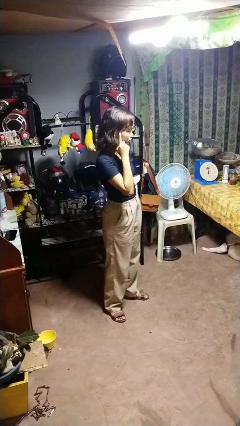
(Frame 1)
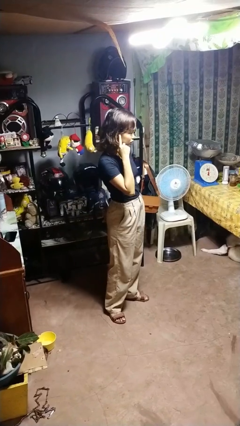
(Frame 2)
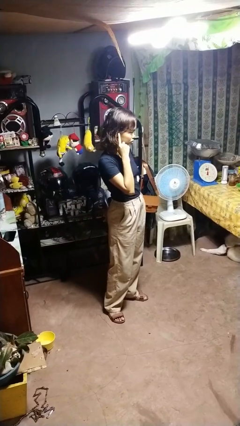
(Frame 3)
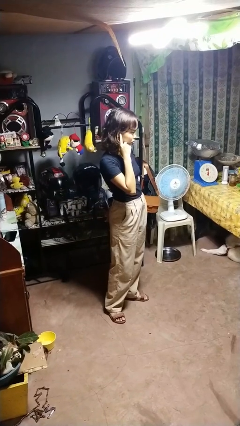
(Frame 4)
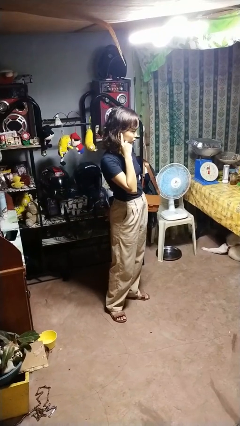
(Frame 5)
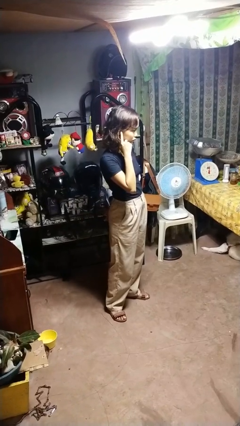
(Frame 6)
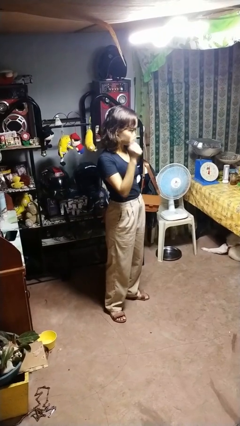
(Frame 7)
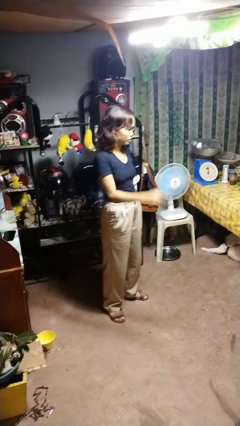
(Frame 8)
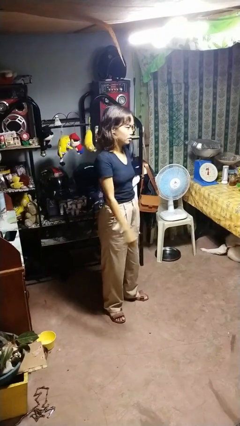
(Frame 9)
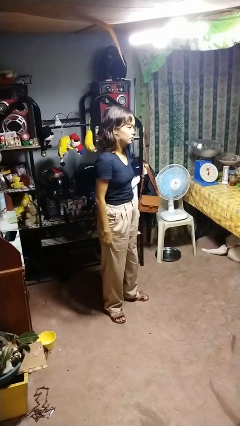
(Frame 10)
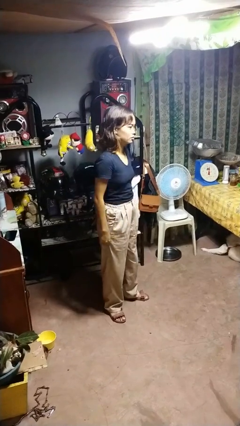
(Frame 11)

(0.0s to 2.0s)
person gestures listen closely

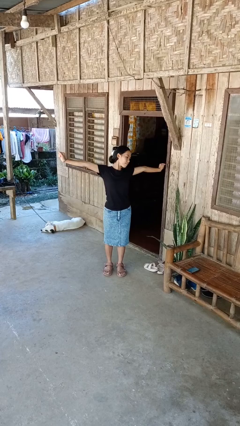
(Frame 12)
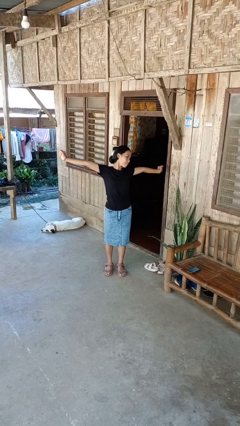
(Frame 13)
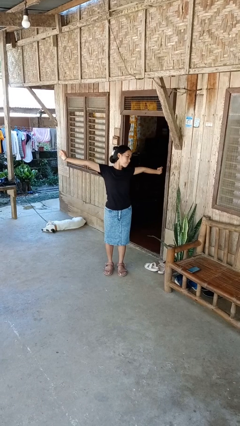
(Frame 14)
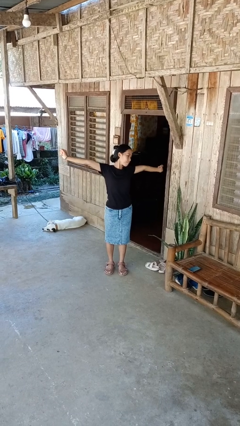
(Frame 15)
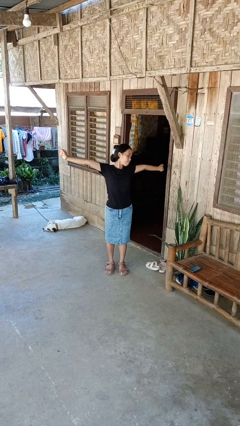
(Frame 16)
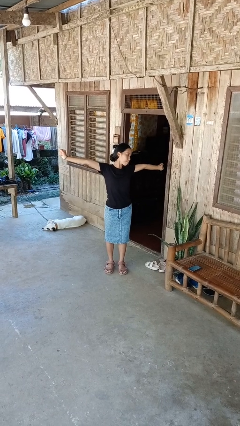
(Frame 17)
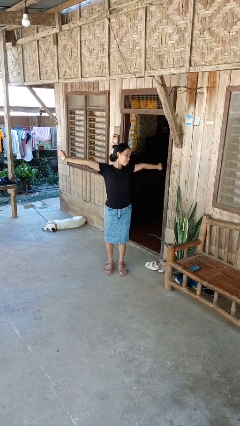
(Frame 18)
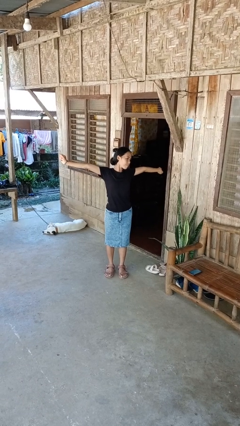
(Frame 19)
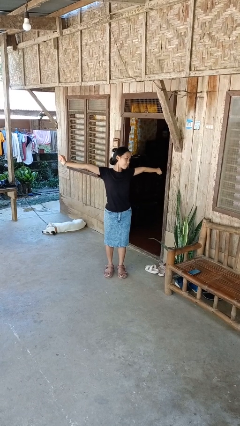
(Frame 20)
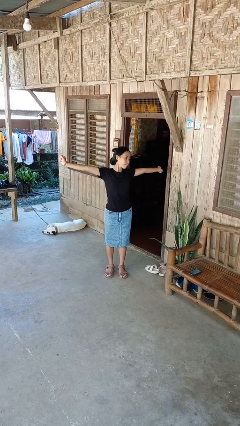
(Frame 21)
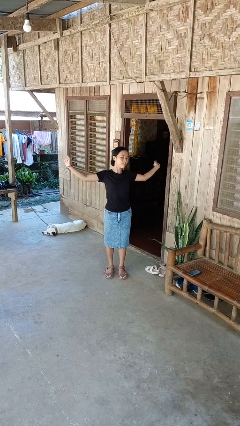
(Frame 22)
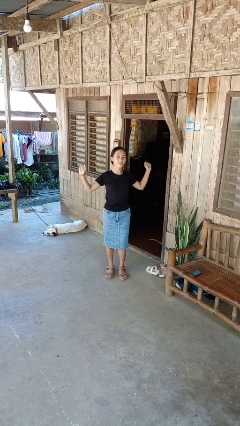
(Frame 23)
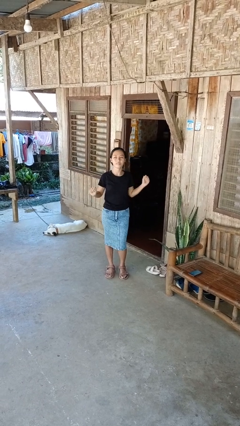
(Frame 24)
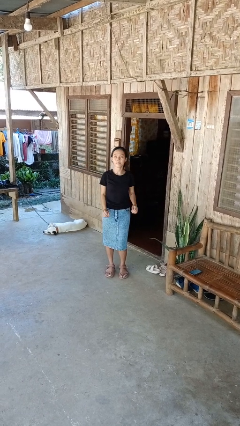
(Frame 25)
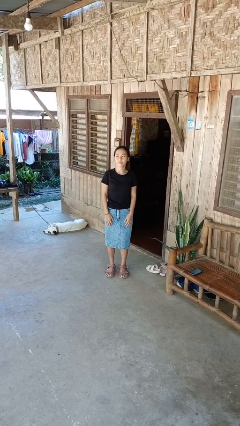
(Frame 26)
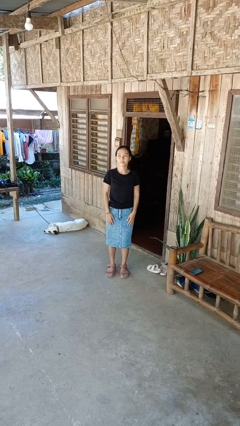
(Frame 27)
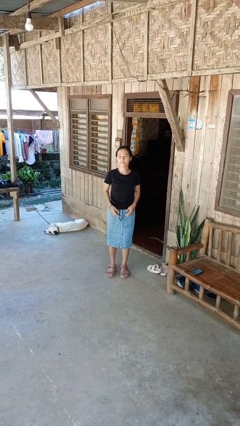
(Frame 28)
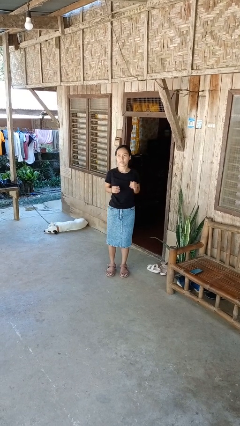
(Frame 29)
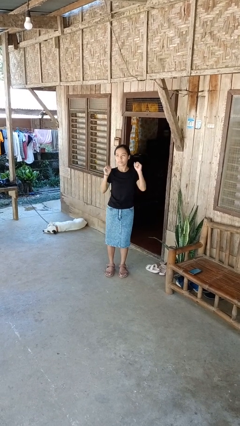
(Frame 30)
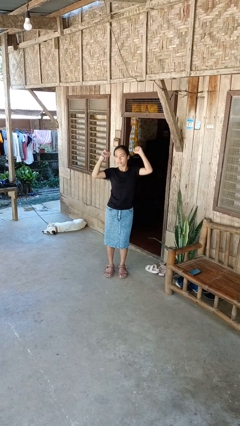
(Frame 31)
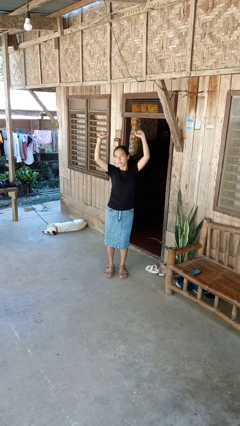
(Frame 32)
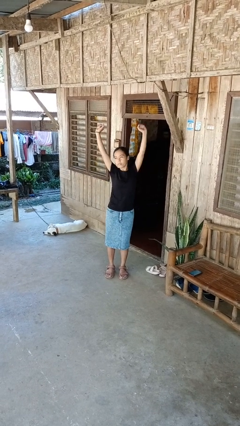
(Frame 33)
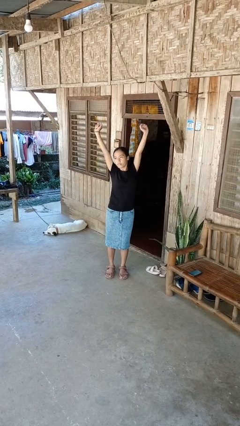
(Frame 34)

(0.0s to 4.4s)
person stretches arms to side

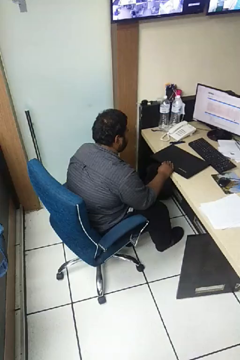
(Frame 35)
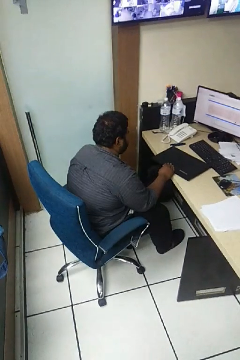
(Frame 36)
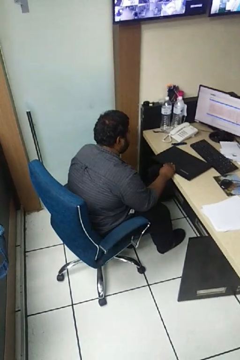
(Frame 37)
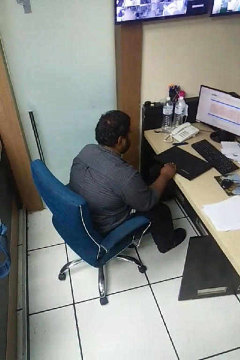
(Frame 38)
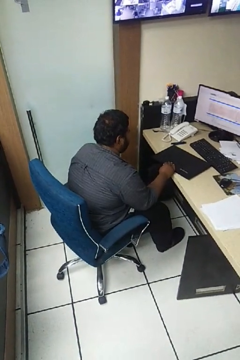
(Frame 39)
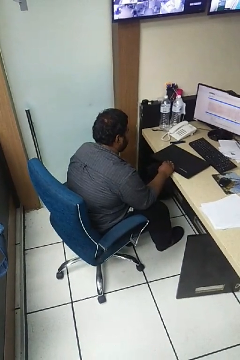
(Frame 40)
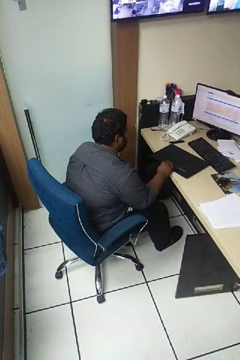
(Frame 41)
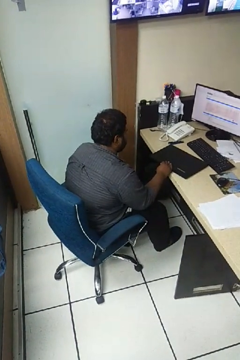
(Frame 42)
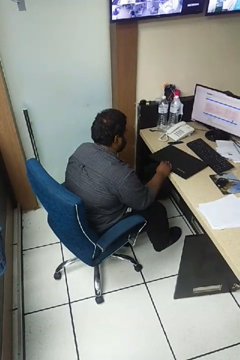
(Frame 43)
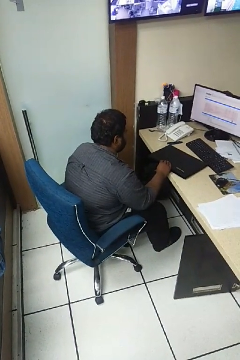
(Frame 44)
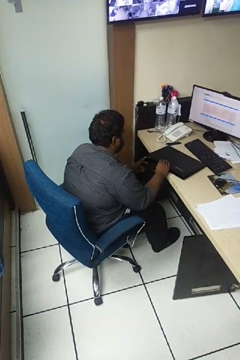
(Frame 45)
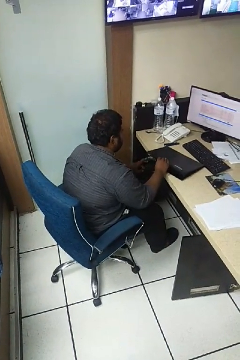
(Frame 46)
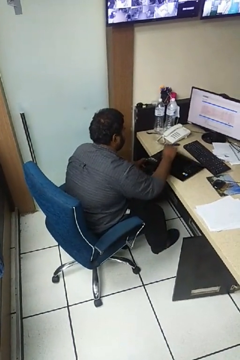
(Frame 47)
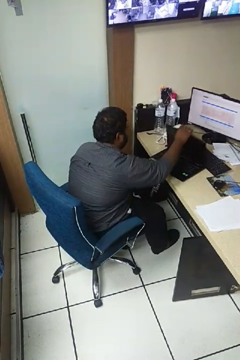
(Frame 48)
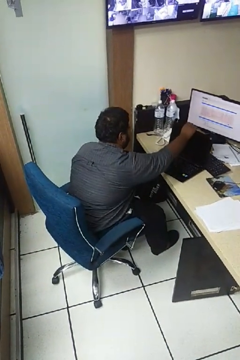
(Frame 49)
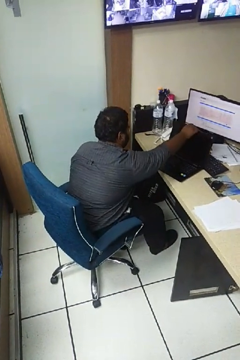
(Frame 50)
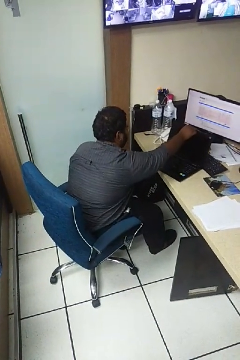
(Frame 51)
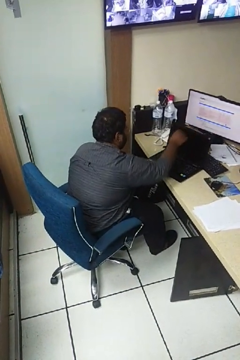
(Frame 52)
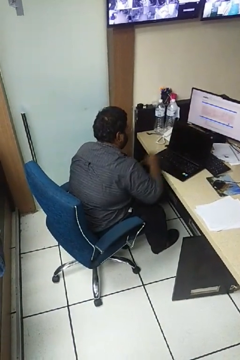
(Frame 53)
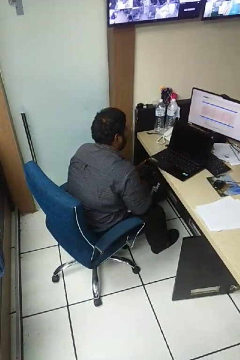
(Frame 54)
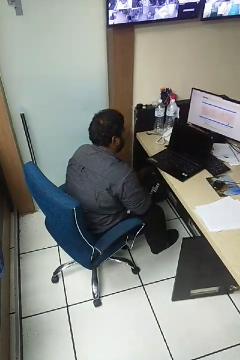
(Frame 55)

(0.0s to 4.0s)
person opens laptop

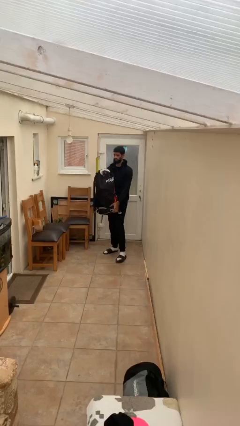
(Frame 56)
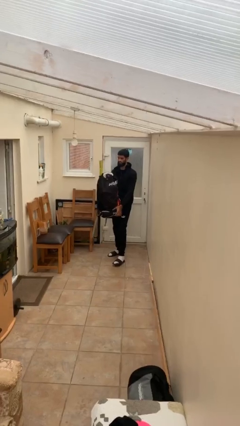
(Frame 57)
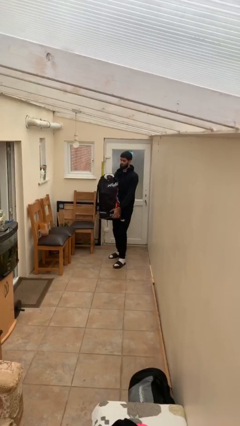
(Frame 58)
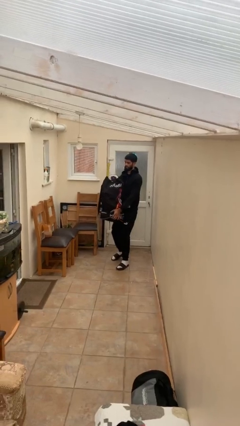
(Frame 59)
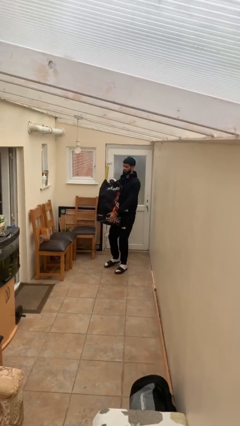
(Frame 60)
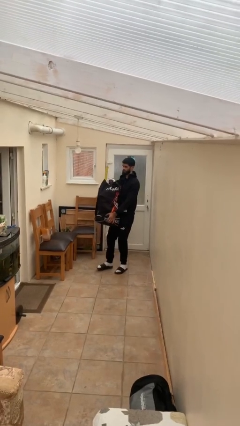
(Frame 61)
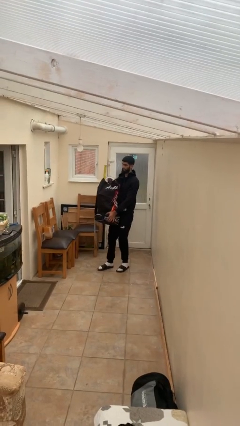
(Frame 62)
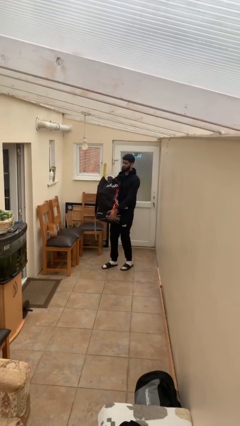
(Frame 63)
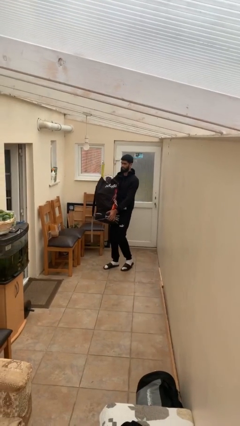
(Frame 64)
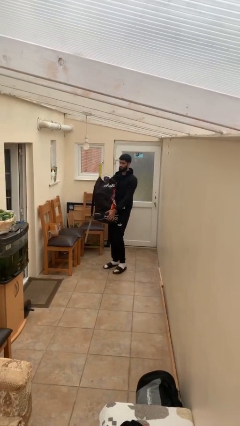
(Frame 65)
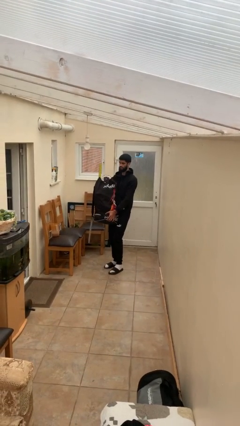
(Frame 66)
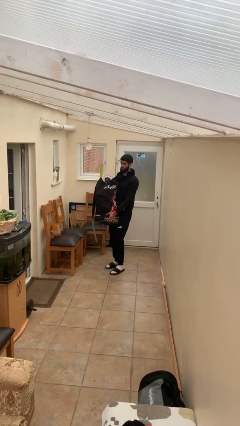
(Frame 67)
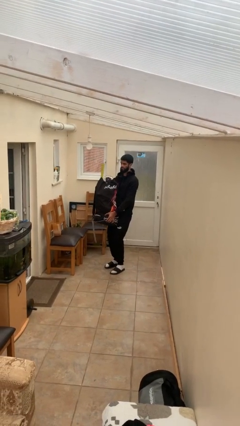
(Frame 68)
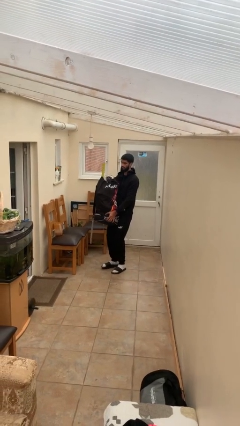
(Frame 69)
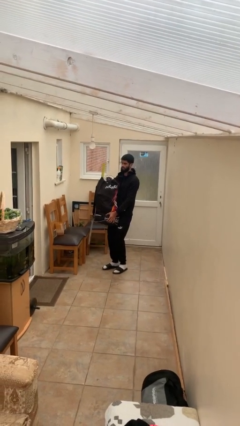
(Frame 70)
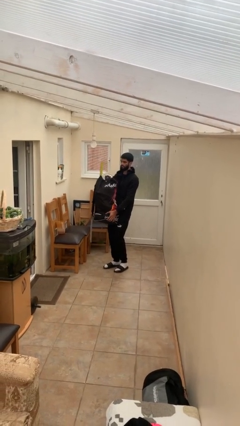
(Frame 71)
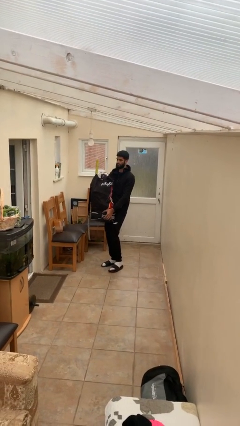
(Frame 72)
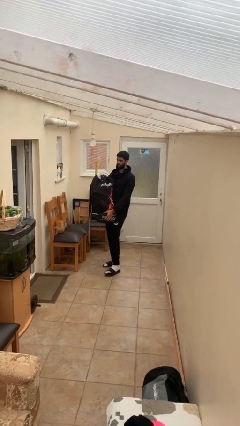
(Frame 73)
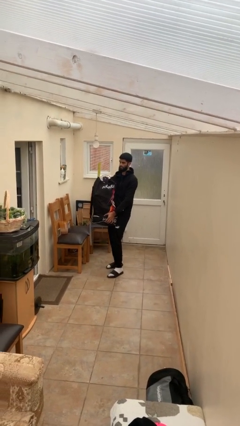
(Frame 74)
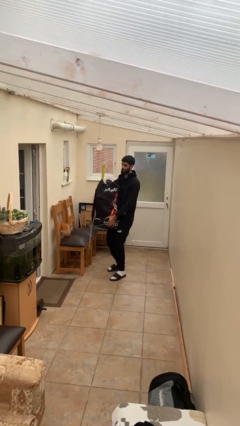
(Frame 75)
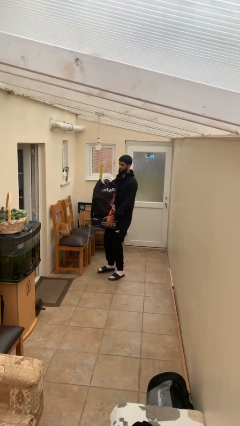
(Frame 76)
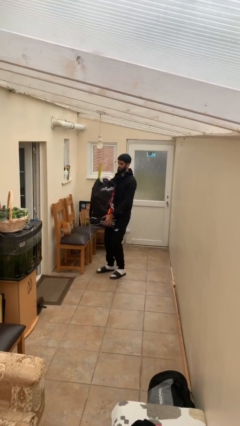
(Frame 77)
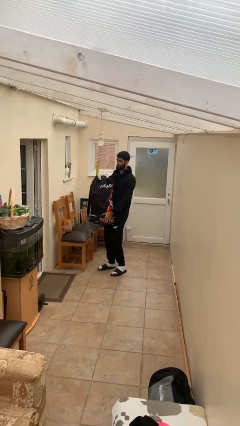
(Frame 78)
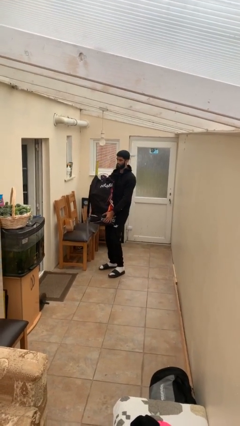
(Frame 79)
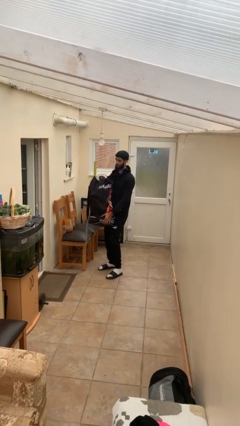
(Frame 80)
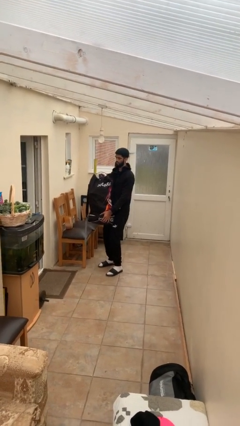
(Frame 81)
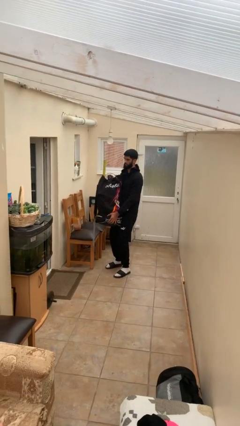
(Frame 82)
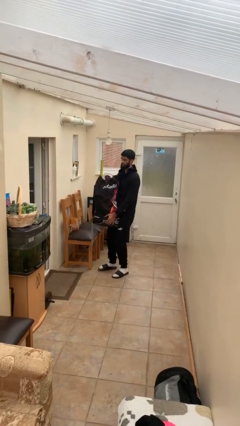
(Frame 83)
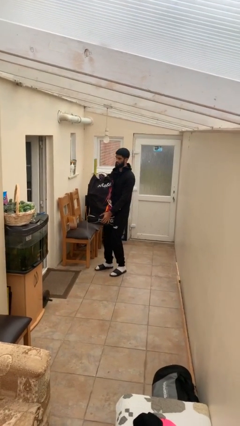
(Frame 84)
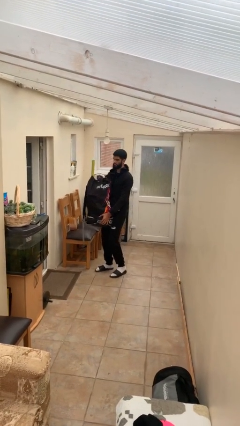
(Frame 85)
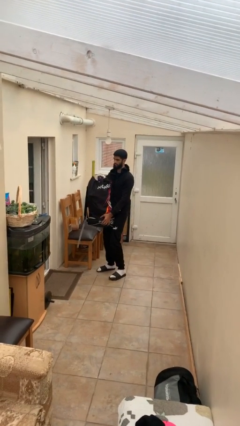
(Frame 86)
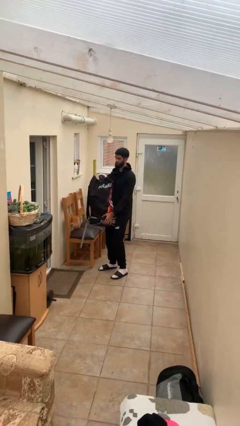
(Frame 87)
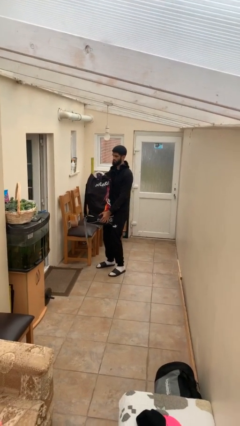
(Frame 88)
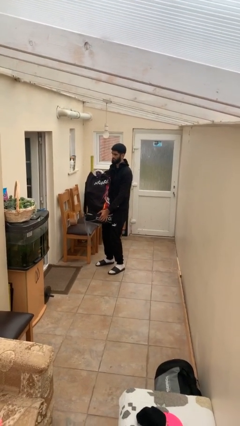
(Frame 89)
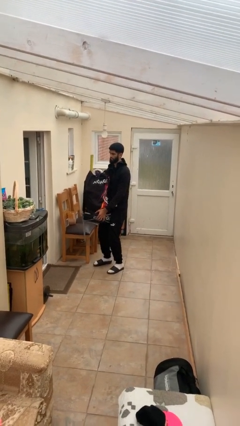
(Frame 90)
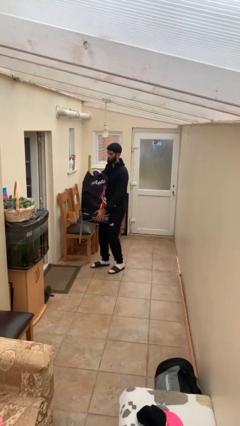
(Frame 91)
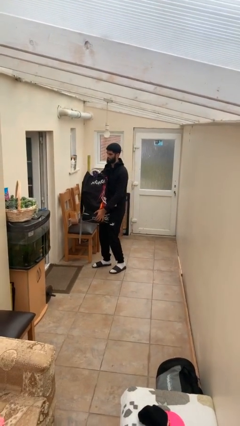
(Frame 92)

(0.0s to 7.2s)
person carries heavy object

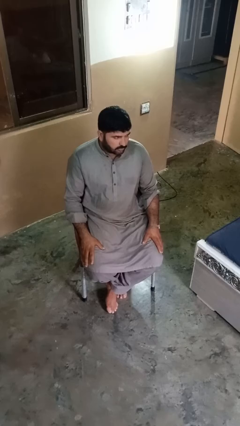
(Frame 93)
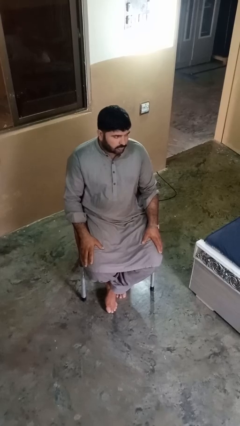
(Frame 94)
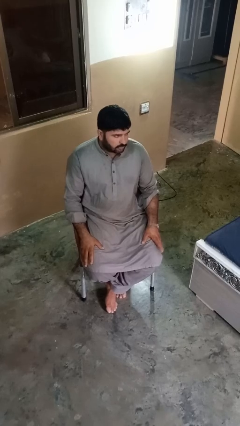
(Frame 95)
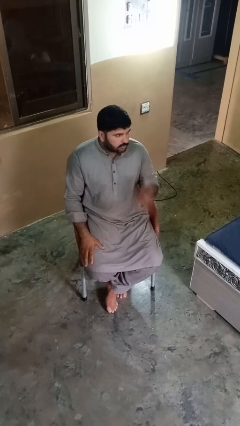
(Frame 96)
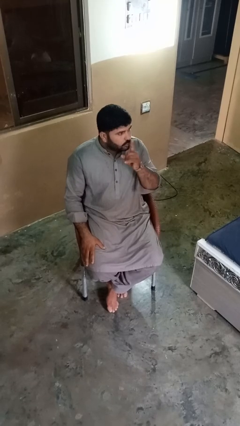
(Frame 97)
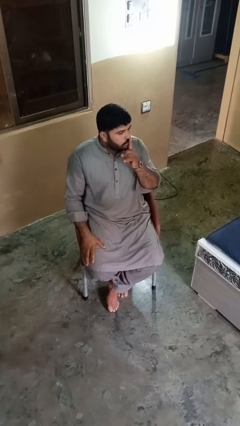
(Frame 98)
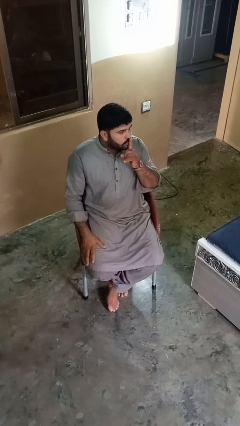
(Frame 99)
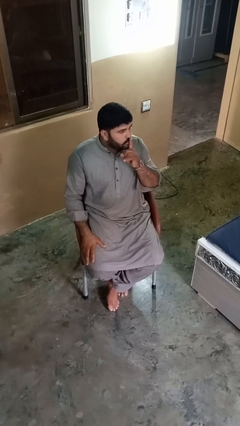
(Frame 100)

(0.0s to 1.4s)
person gestures be quiet
